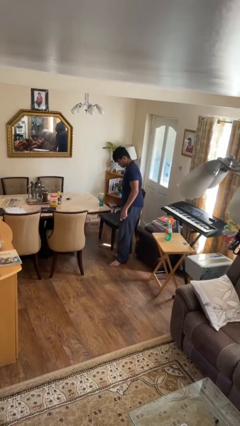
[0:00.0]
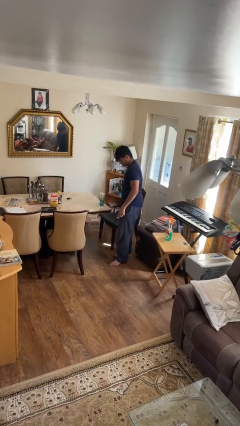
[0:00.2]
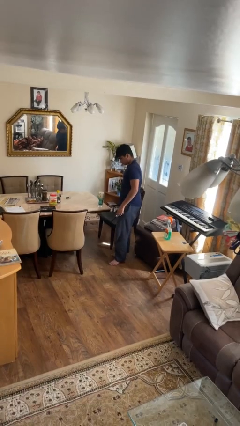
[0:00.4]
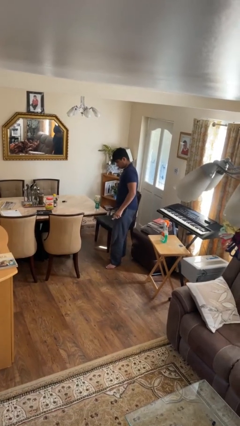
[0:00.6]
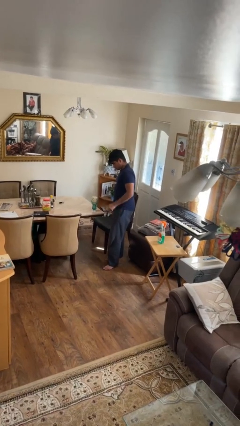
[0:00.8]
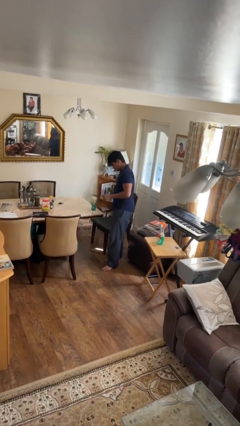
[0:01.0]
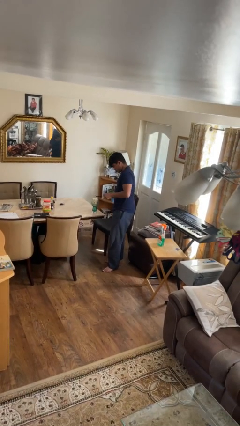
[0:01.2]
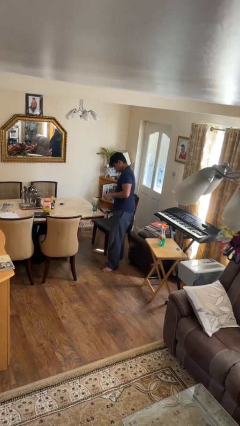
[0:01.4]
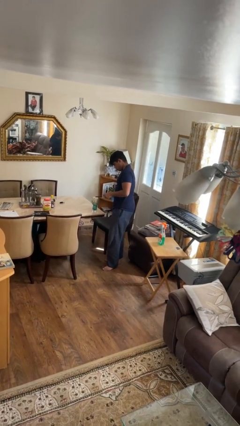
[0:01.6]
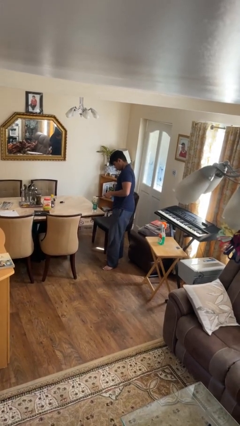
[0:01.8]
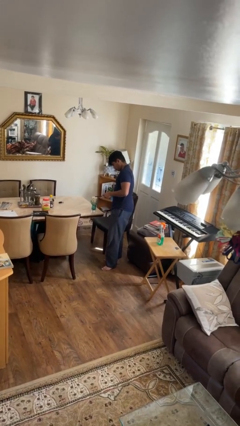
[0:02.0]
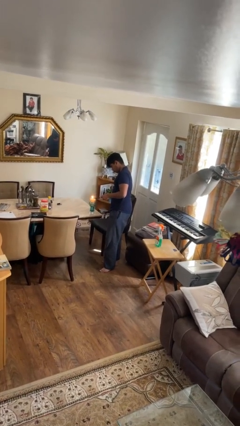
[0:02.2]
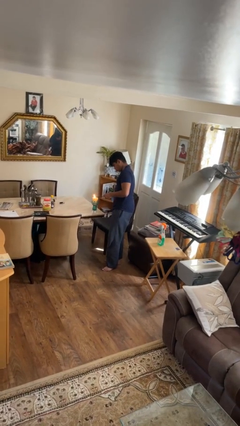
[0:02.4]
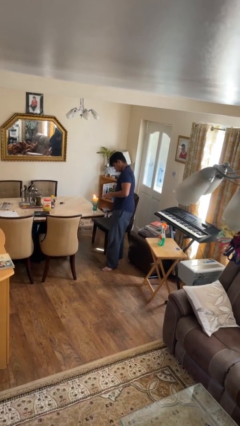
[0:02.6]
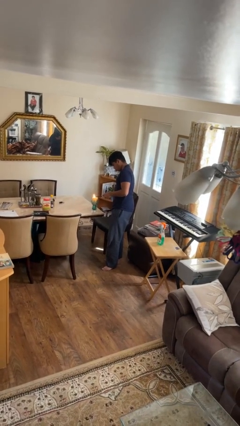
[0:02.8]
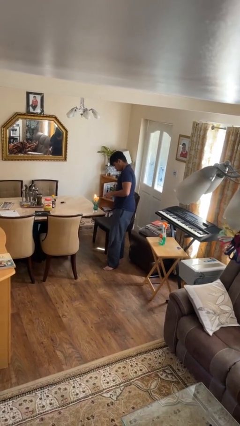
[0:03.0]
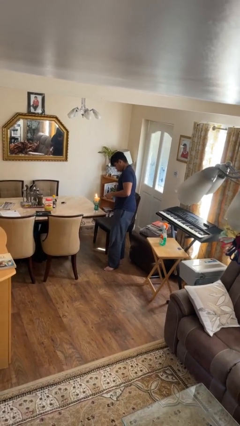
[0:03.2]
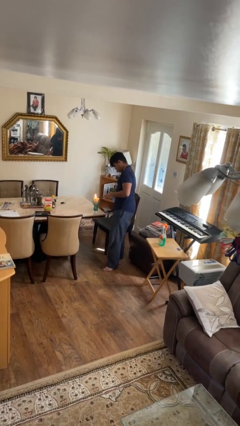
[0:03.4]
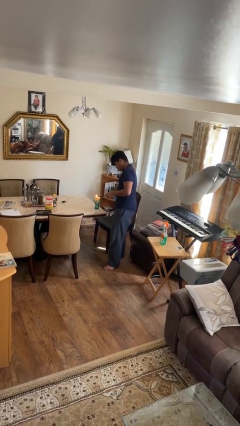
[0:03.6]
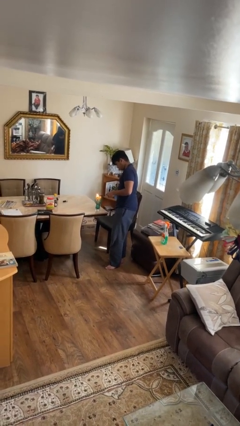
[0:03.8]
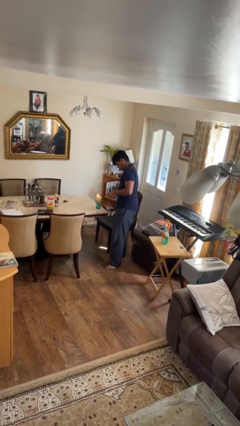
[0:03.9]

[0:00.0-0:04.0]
person lights candle

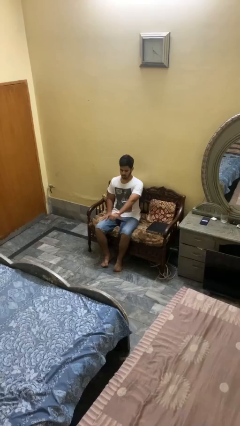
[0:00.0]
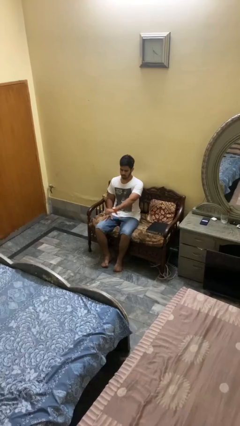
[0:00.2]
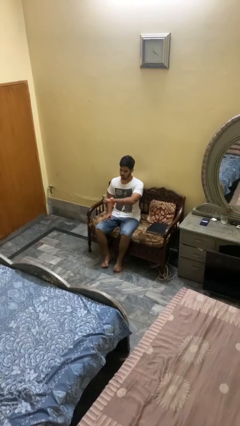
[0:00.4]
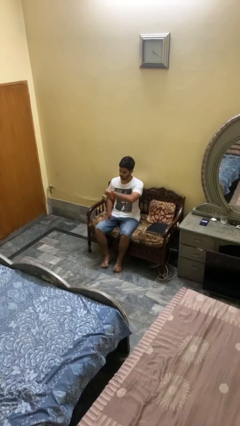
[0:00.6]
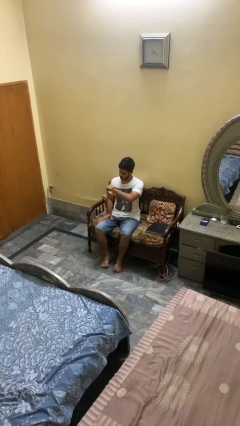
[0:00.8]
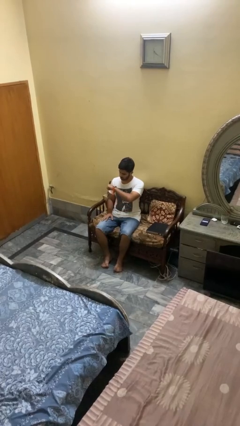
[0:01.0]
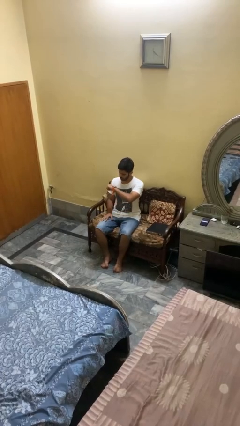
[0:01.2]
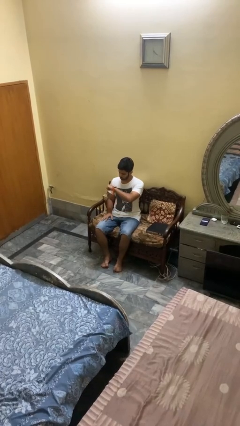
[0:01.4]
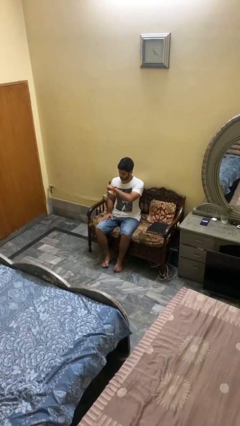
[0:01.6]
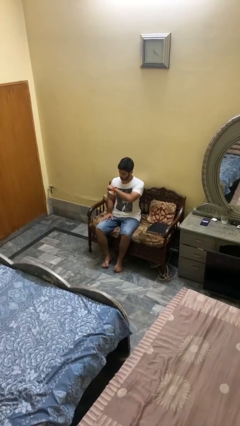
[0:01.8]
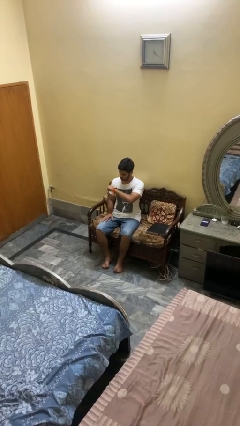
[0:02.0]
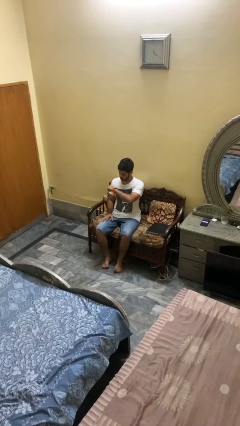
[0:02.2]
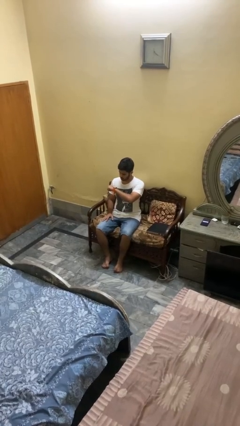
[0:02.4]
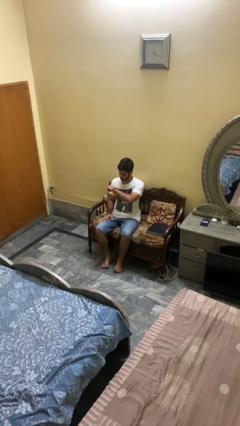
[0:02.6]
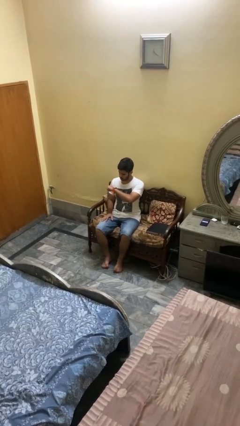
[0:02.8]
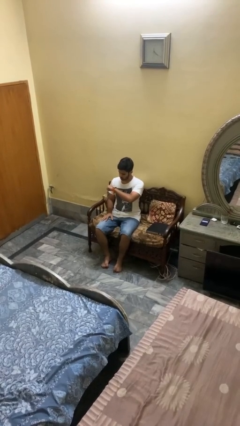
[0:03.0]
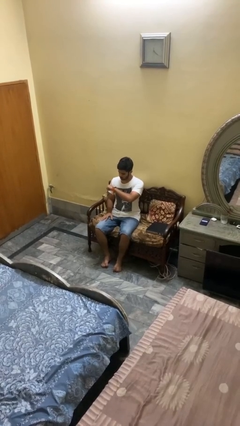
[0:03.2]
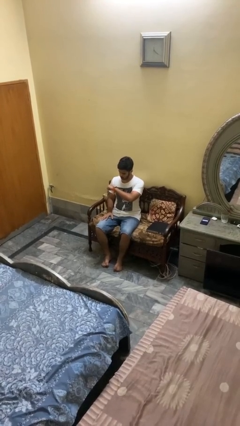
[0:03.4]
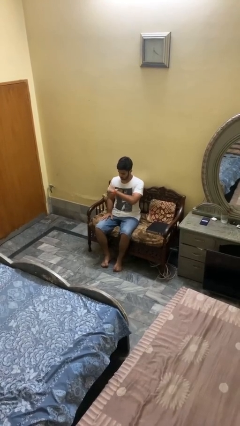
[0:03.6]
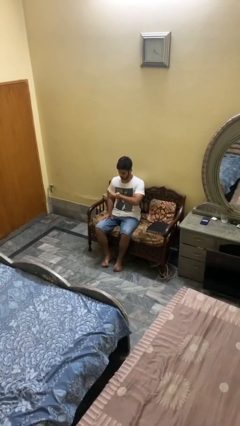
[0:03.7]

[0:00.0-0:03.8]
person looks at wristwatch

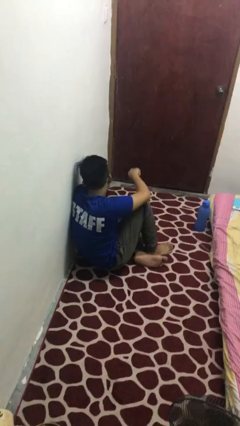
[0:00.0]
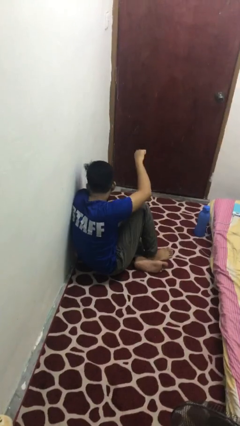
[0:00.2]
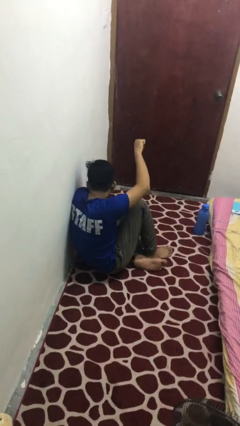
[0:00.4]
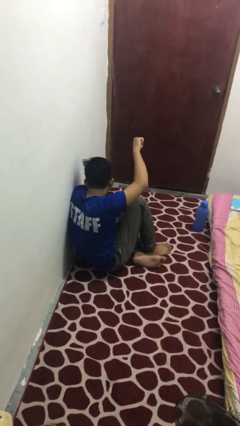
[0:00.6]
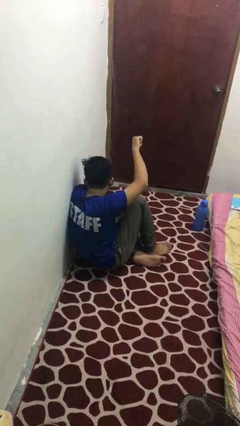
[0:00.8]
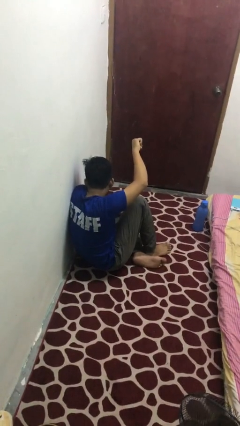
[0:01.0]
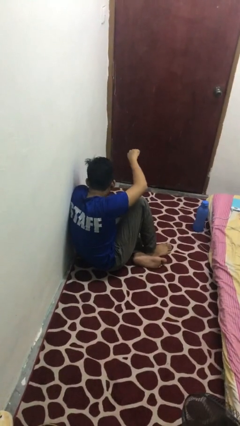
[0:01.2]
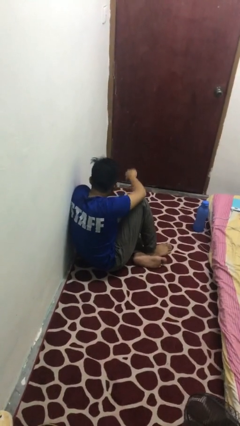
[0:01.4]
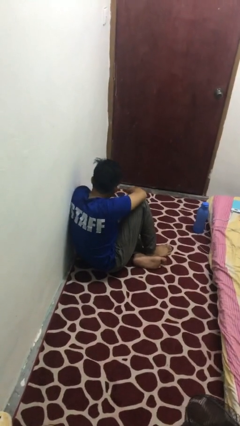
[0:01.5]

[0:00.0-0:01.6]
person gestures thumbs down

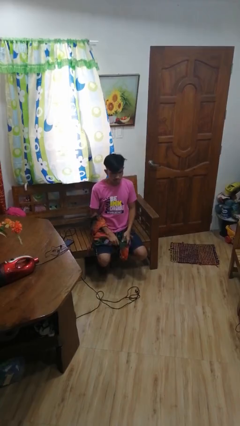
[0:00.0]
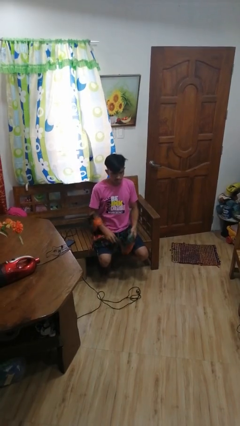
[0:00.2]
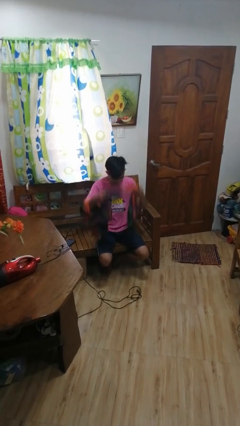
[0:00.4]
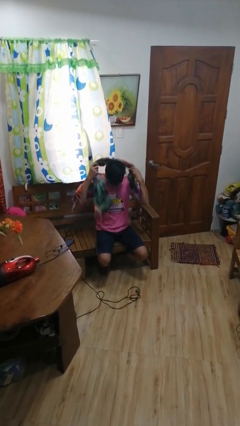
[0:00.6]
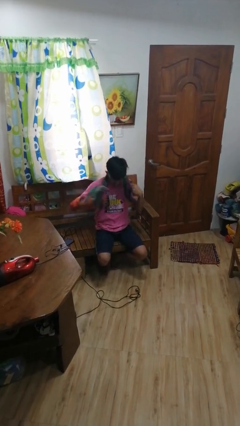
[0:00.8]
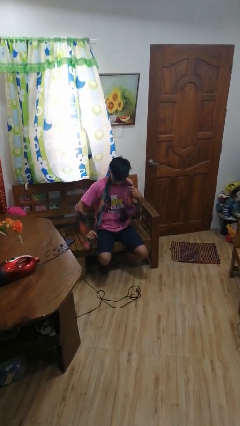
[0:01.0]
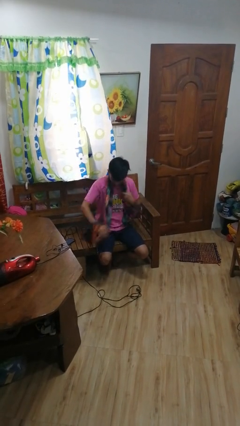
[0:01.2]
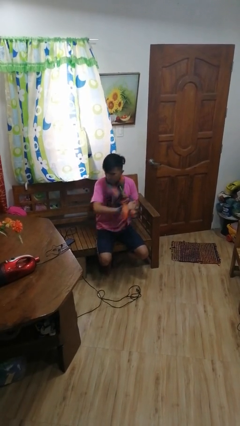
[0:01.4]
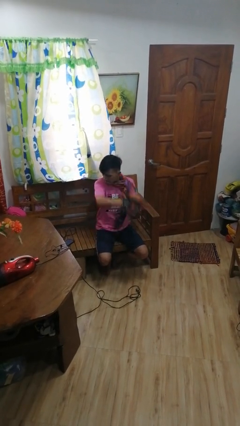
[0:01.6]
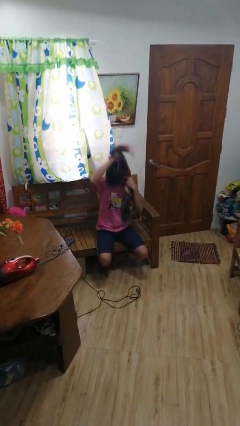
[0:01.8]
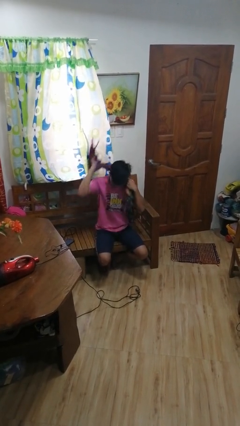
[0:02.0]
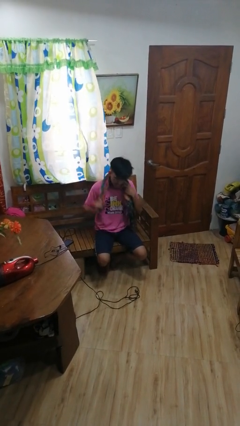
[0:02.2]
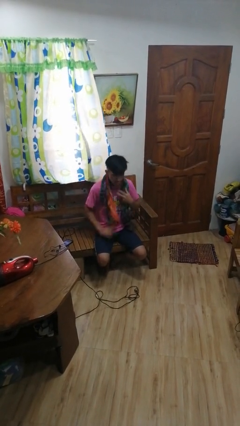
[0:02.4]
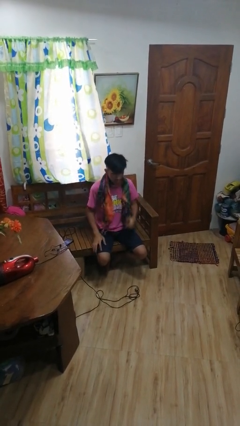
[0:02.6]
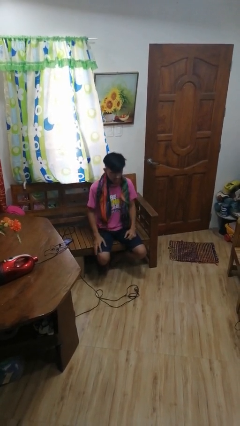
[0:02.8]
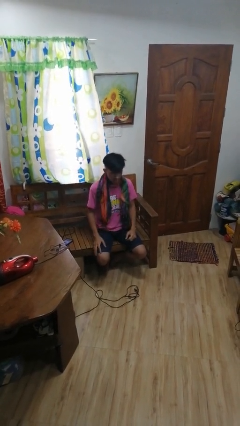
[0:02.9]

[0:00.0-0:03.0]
person puts on scarf

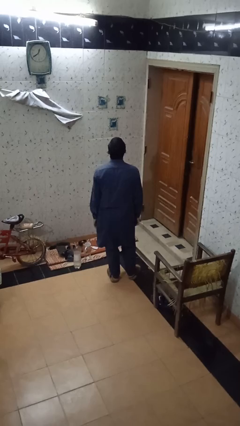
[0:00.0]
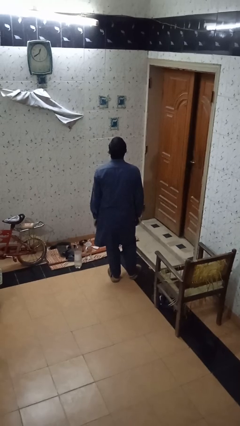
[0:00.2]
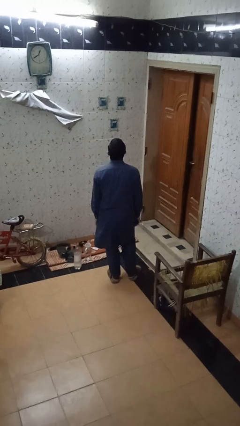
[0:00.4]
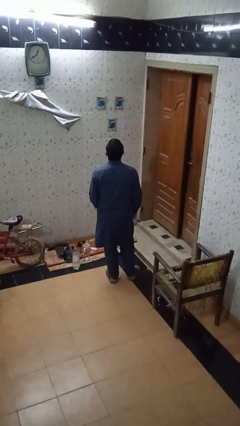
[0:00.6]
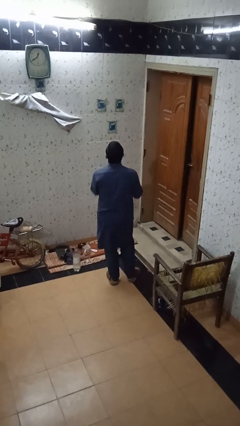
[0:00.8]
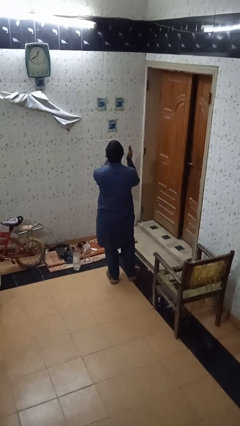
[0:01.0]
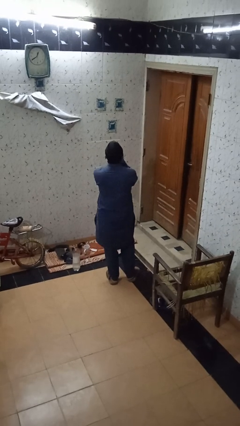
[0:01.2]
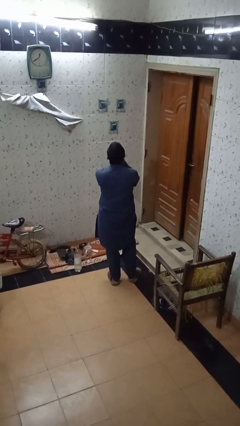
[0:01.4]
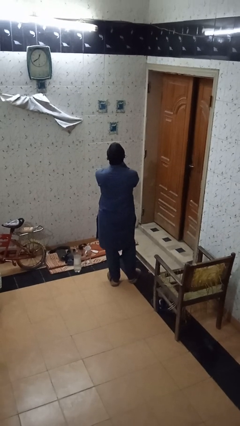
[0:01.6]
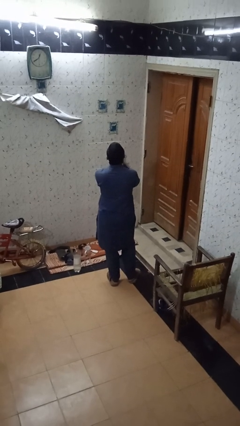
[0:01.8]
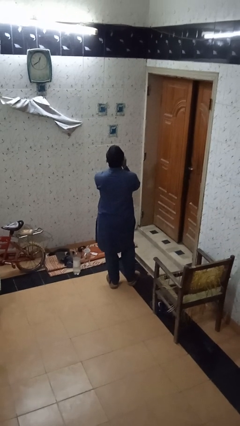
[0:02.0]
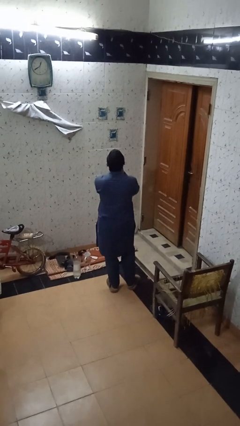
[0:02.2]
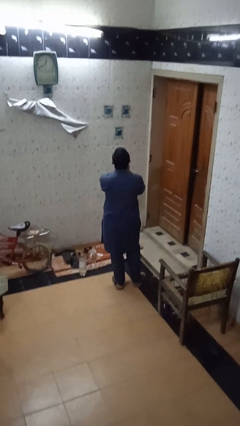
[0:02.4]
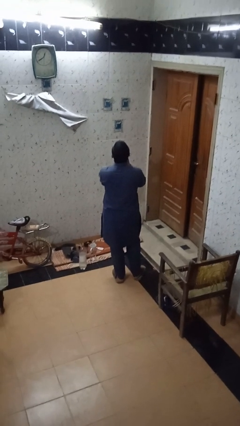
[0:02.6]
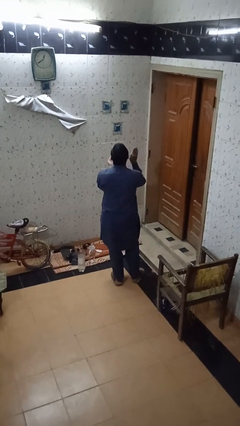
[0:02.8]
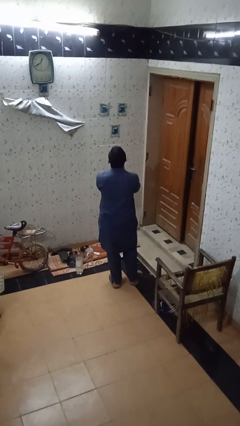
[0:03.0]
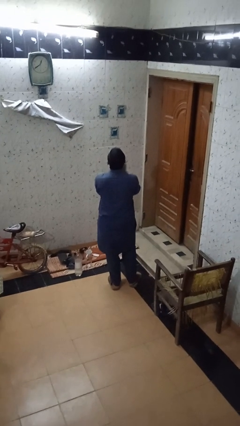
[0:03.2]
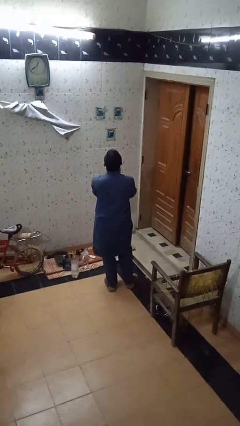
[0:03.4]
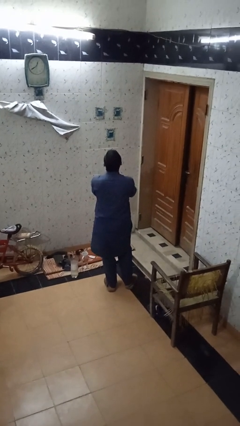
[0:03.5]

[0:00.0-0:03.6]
person claps hands

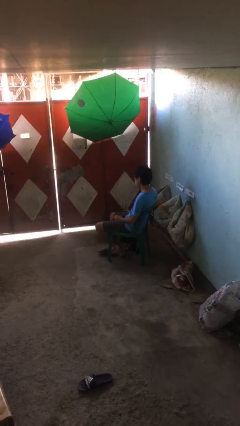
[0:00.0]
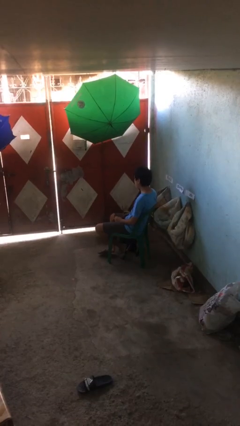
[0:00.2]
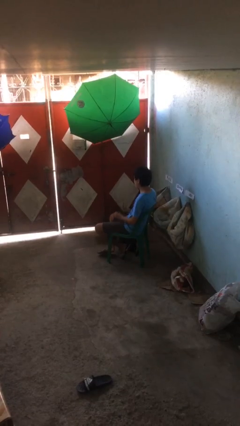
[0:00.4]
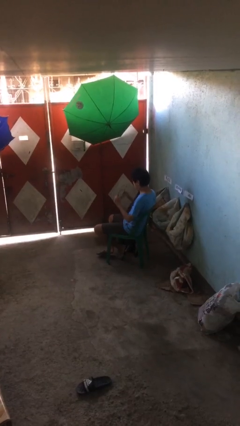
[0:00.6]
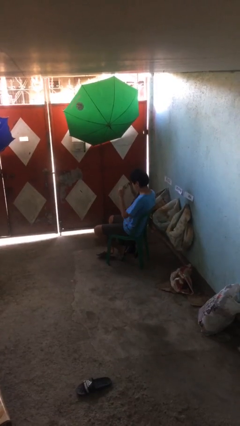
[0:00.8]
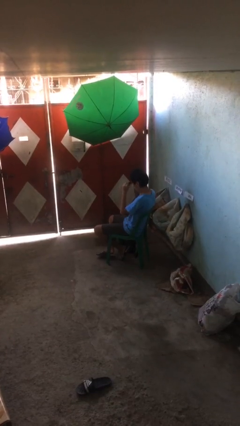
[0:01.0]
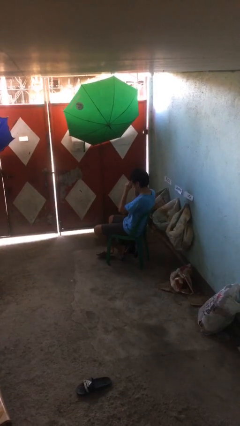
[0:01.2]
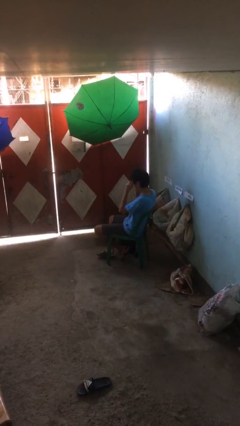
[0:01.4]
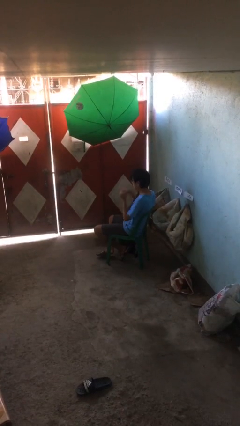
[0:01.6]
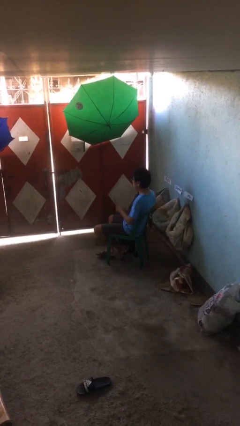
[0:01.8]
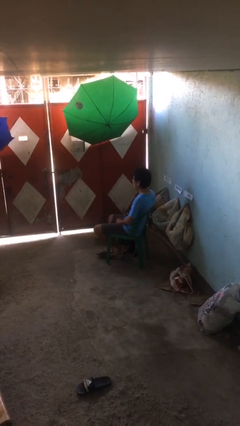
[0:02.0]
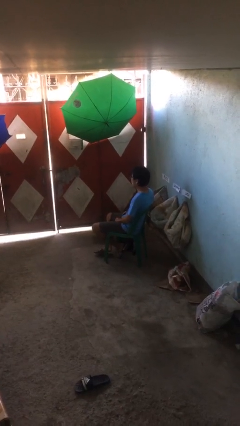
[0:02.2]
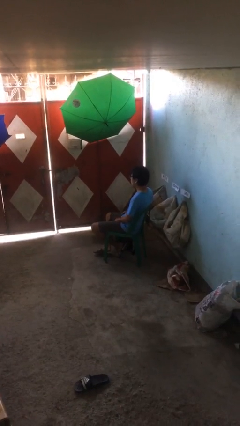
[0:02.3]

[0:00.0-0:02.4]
person puts on glasses
